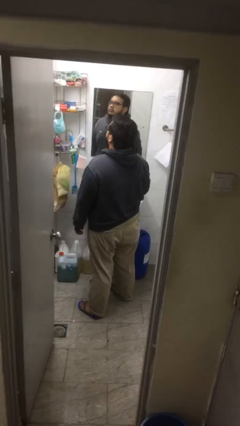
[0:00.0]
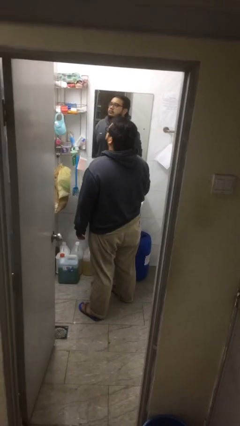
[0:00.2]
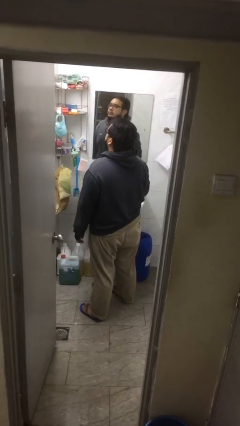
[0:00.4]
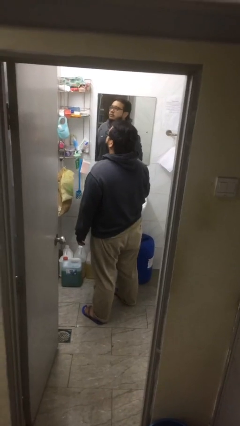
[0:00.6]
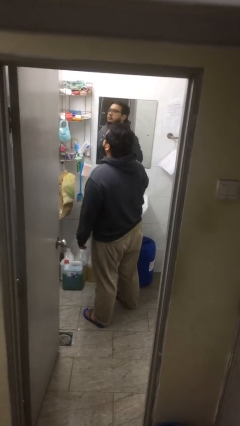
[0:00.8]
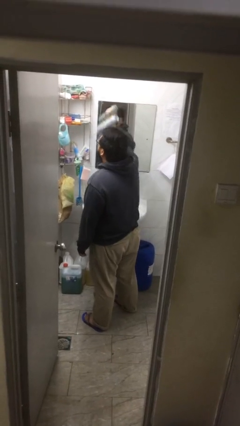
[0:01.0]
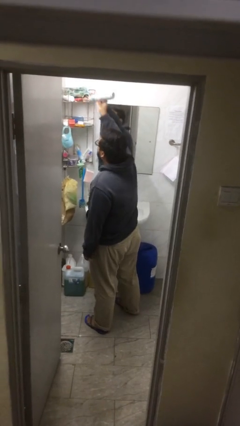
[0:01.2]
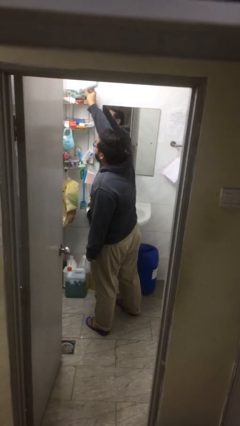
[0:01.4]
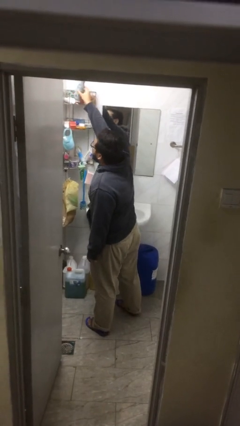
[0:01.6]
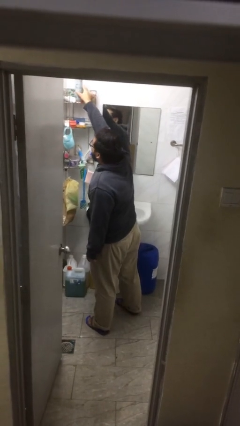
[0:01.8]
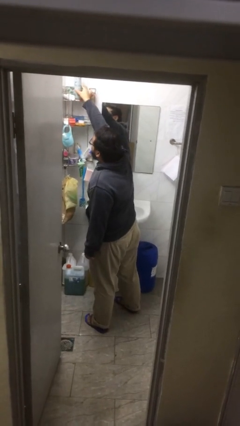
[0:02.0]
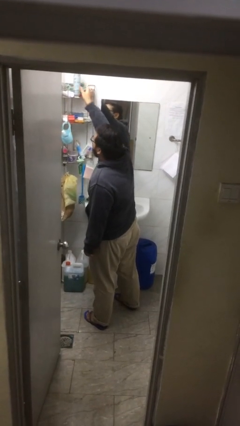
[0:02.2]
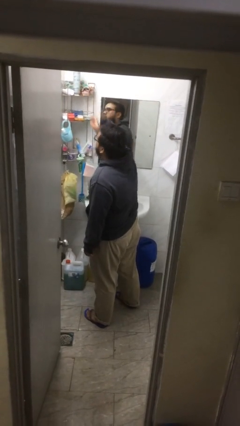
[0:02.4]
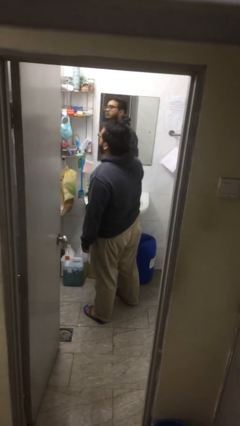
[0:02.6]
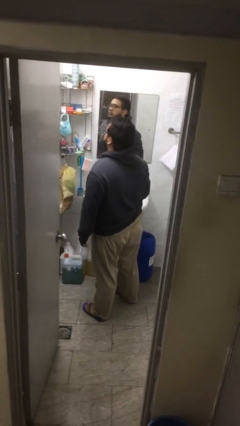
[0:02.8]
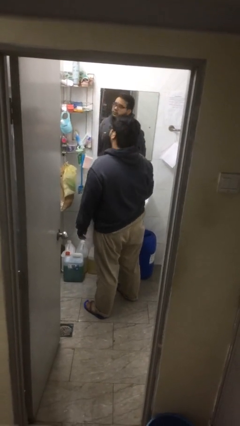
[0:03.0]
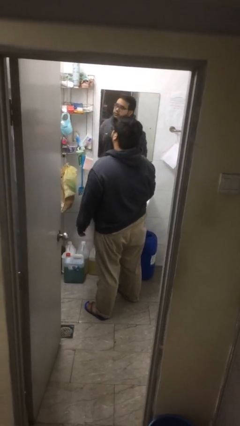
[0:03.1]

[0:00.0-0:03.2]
person puts down object on countertop

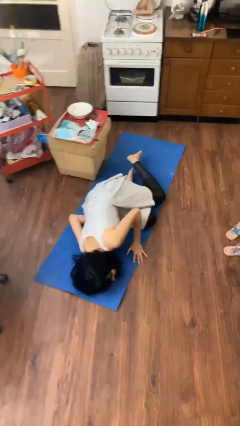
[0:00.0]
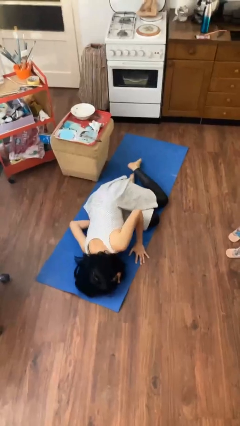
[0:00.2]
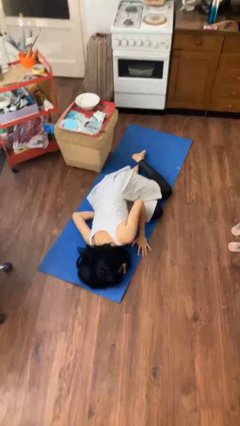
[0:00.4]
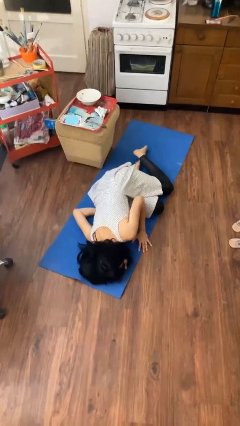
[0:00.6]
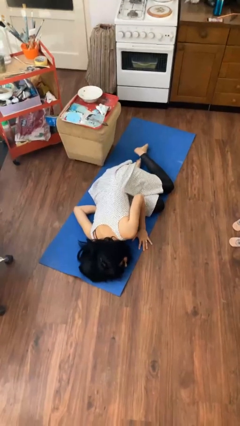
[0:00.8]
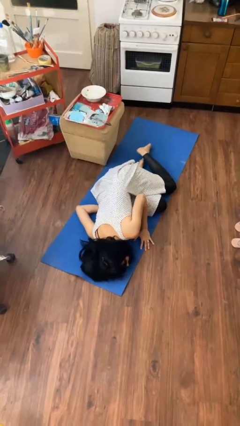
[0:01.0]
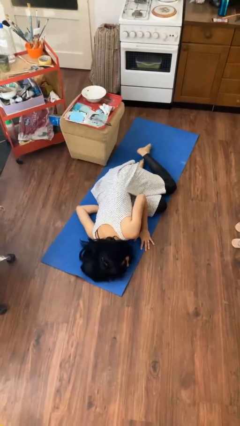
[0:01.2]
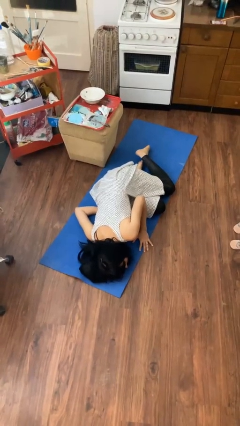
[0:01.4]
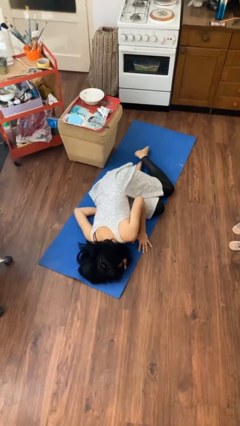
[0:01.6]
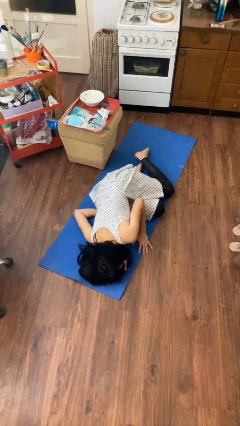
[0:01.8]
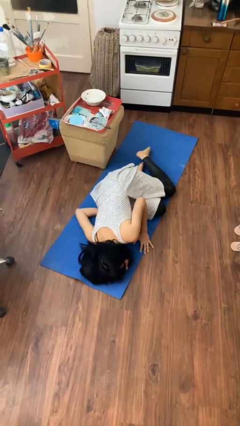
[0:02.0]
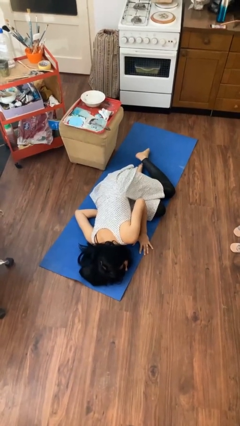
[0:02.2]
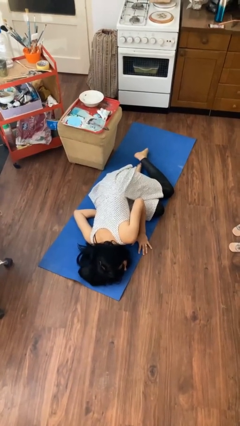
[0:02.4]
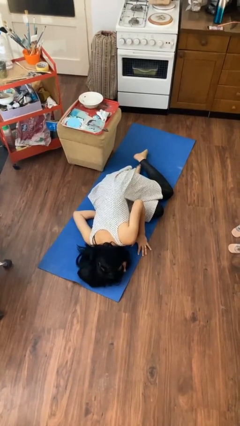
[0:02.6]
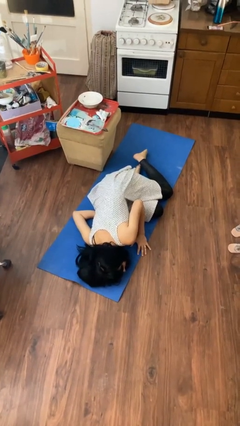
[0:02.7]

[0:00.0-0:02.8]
person lies down on floor

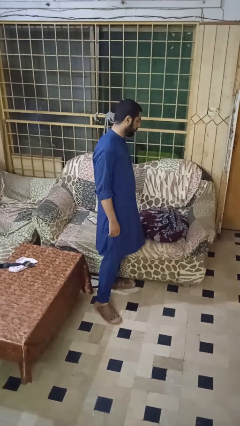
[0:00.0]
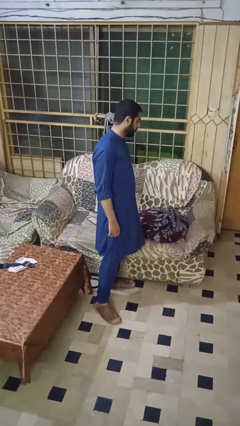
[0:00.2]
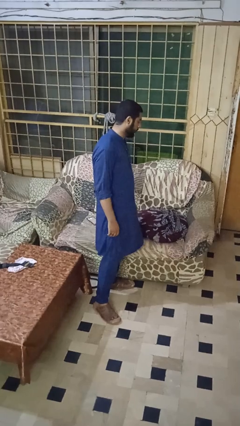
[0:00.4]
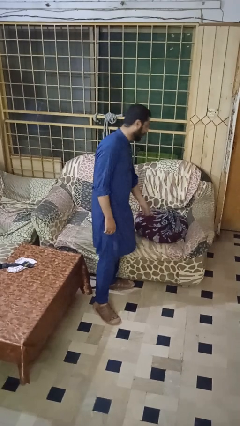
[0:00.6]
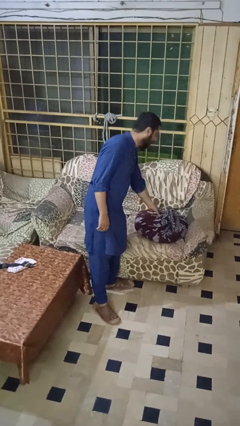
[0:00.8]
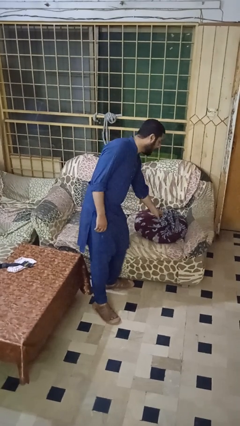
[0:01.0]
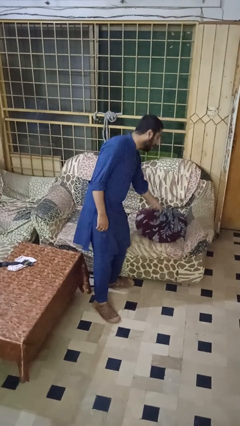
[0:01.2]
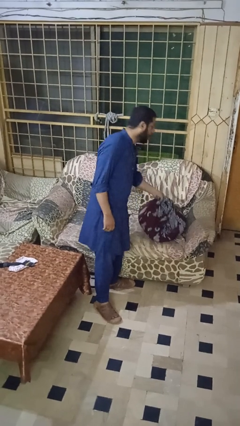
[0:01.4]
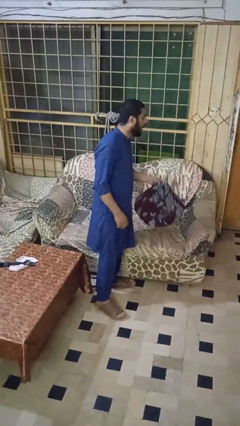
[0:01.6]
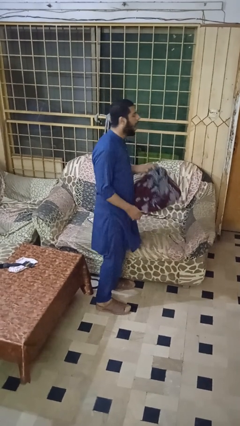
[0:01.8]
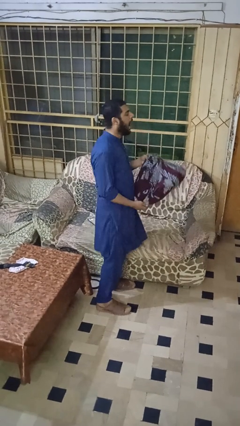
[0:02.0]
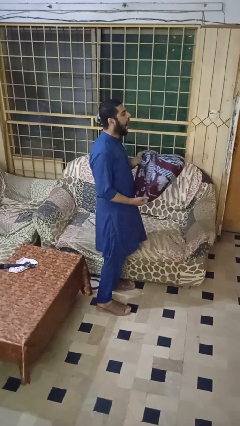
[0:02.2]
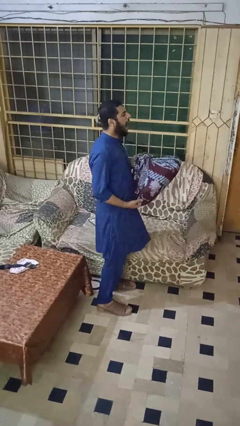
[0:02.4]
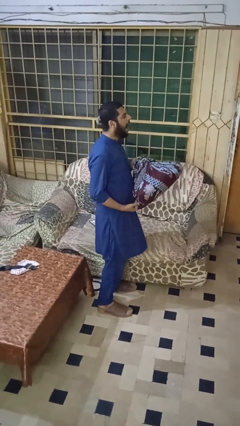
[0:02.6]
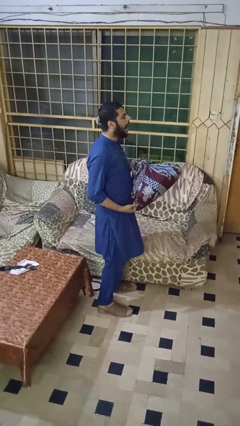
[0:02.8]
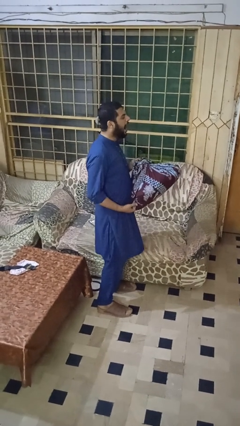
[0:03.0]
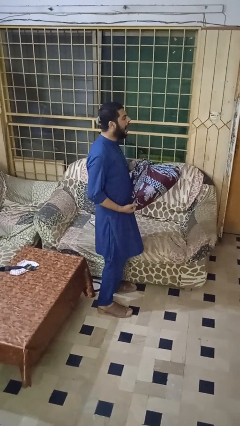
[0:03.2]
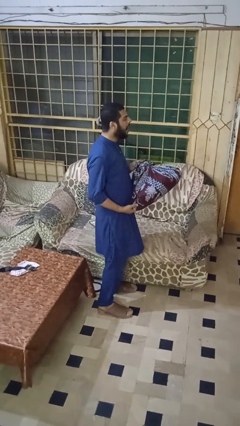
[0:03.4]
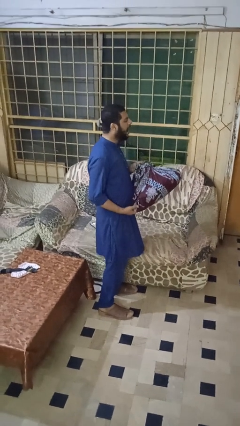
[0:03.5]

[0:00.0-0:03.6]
person picks up object from couch

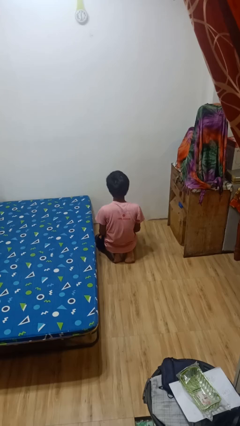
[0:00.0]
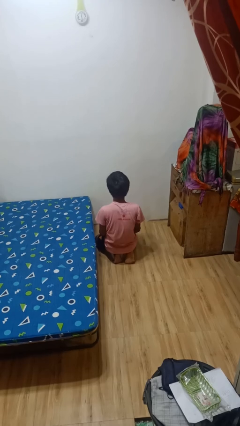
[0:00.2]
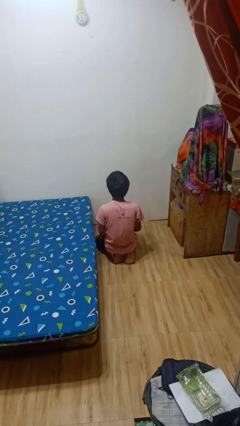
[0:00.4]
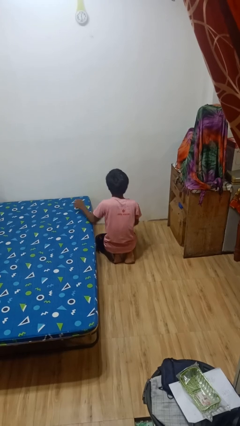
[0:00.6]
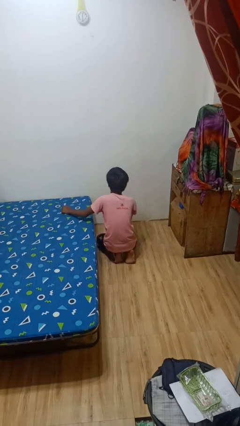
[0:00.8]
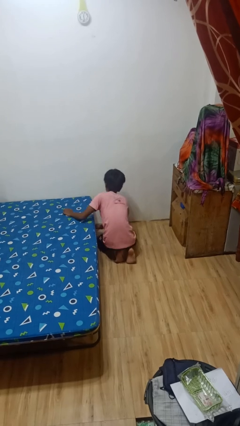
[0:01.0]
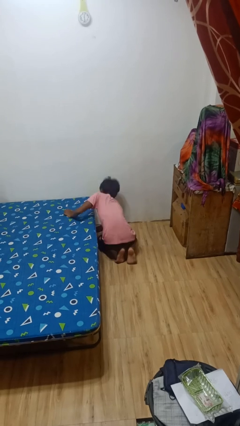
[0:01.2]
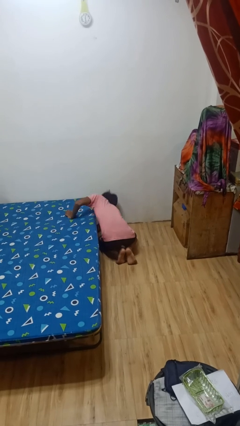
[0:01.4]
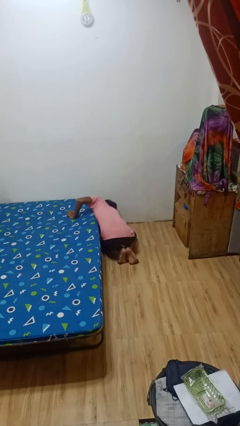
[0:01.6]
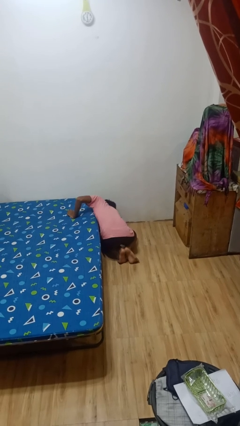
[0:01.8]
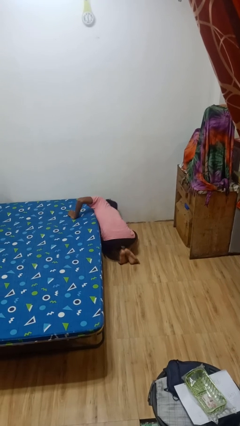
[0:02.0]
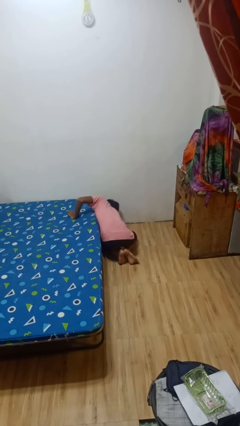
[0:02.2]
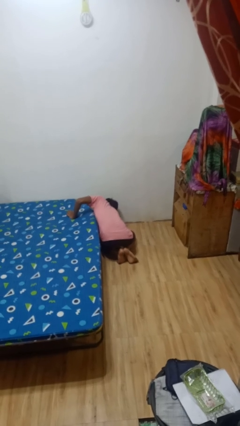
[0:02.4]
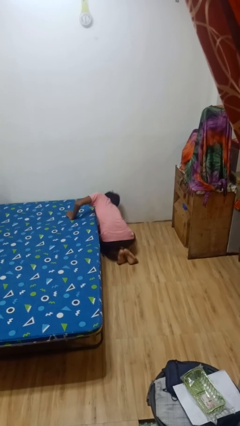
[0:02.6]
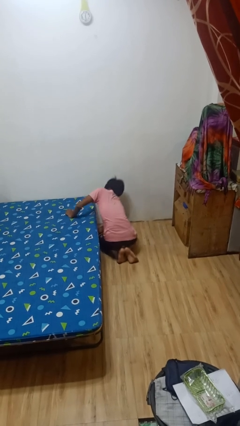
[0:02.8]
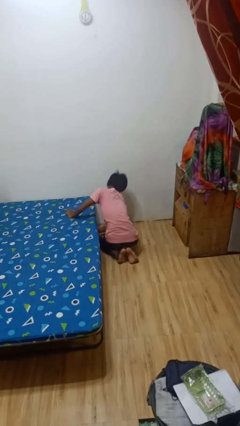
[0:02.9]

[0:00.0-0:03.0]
person searches under bed

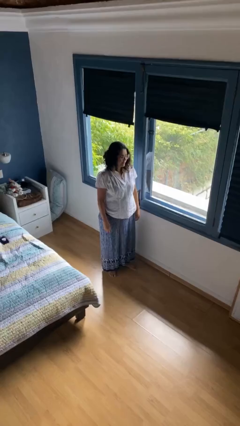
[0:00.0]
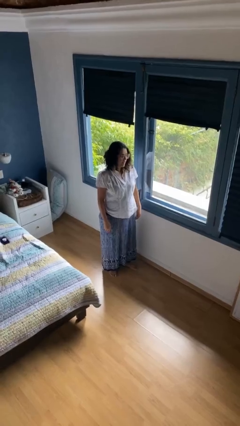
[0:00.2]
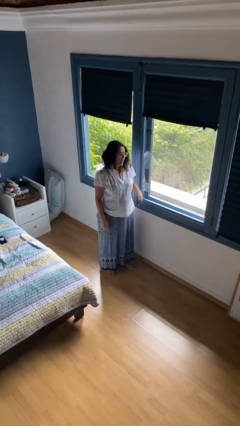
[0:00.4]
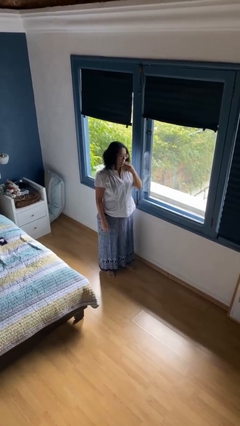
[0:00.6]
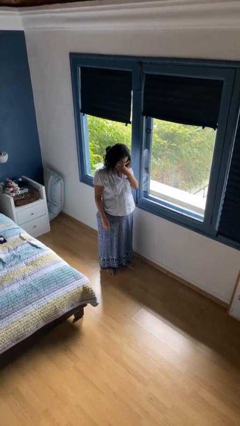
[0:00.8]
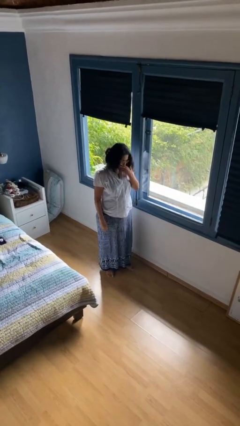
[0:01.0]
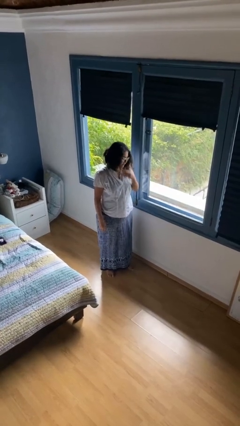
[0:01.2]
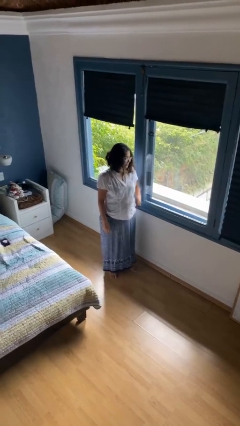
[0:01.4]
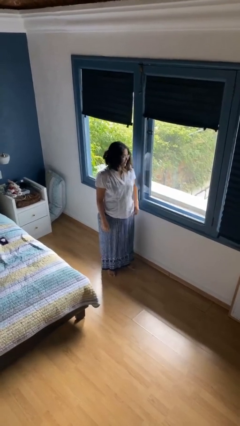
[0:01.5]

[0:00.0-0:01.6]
person sneezes into hand

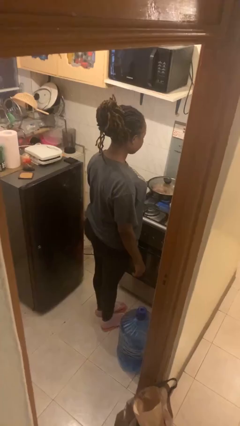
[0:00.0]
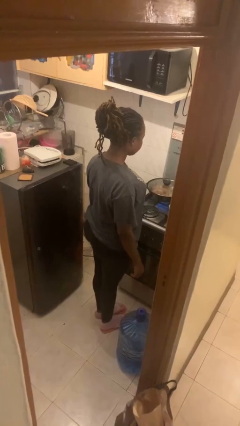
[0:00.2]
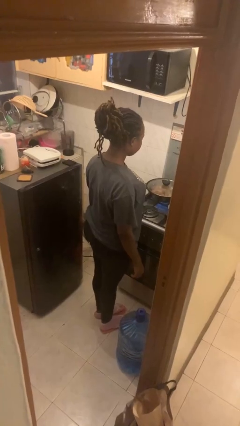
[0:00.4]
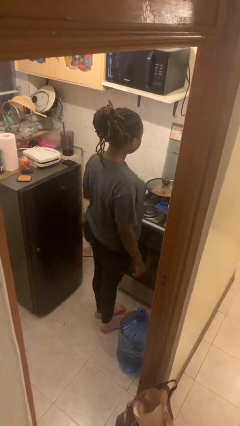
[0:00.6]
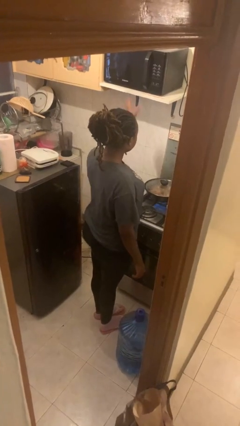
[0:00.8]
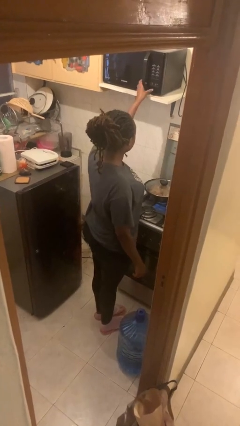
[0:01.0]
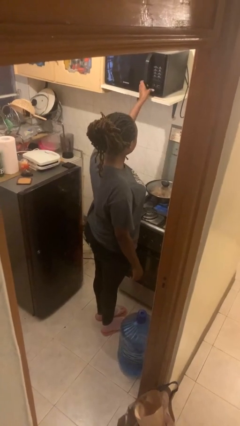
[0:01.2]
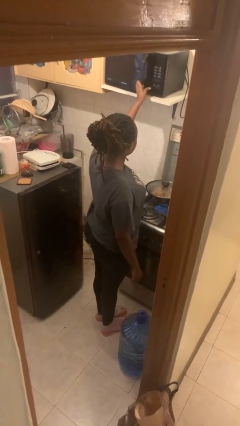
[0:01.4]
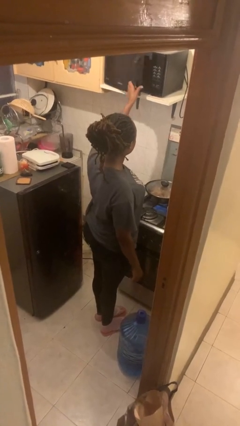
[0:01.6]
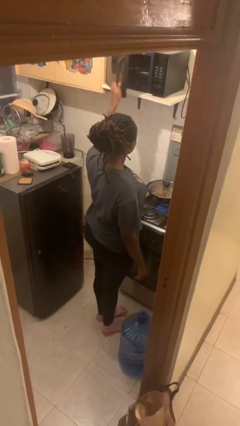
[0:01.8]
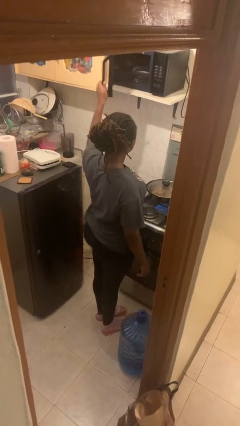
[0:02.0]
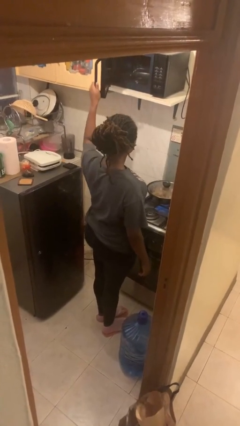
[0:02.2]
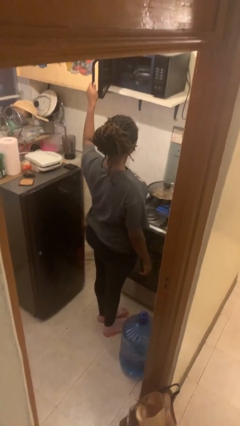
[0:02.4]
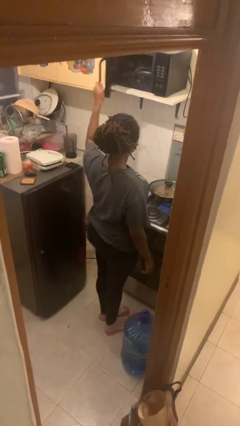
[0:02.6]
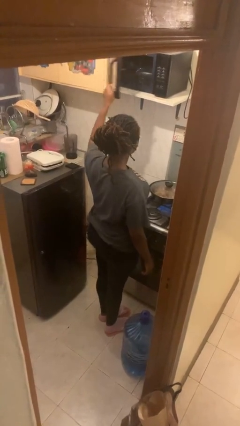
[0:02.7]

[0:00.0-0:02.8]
person opens microwave

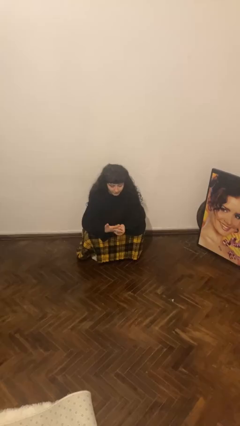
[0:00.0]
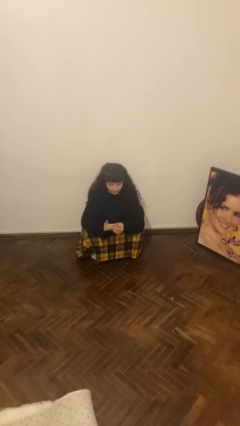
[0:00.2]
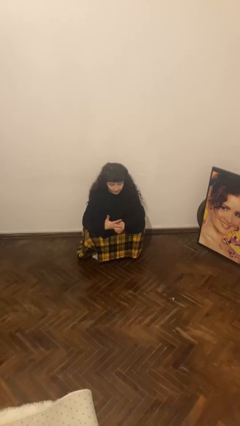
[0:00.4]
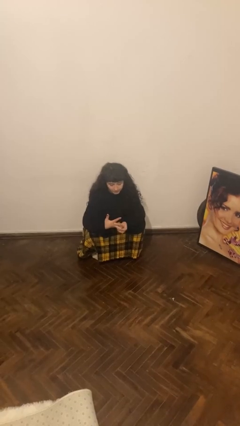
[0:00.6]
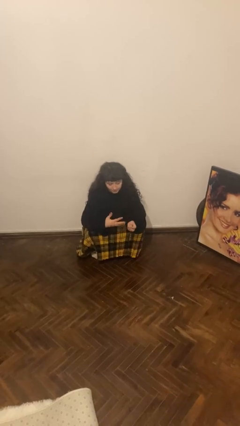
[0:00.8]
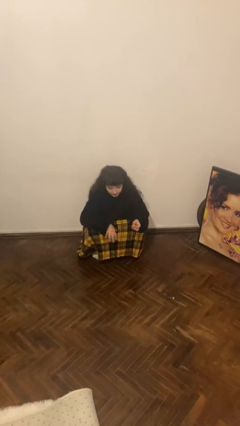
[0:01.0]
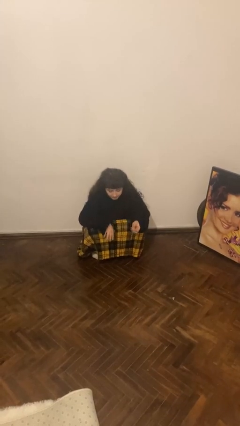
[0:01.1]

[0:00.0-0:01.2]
person takes off ring
